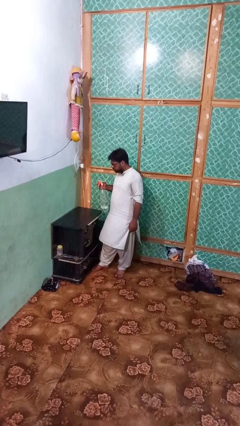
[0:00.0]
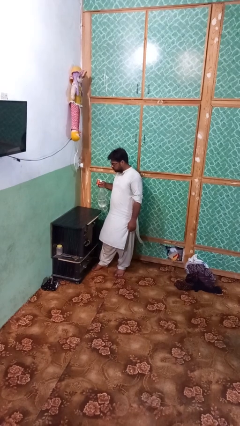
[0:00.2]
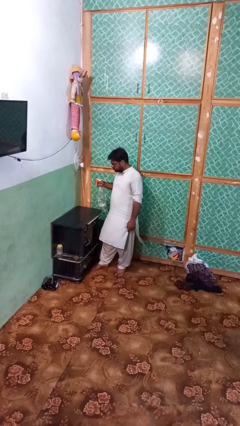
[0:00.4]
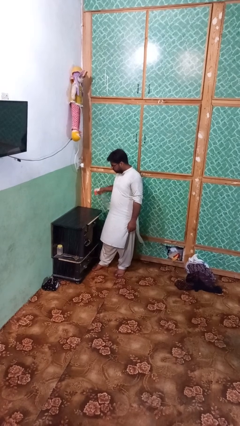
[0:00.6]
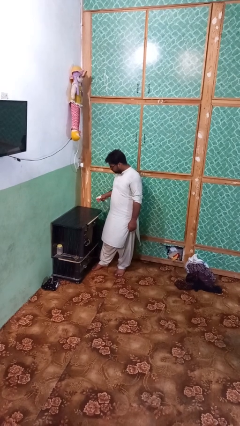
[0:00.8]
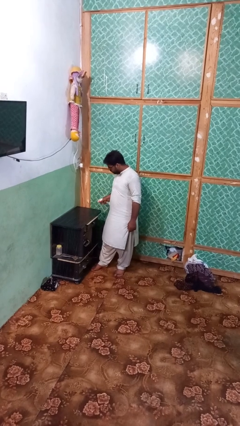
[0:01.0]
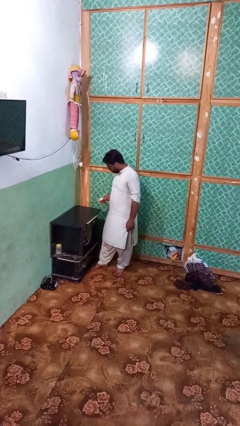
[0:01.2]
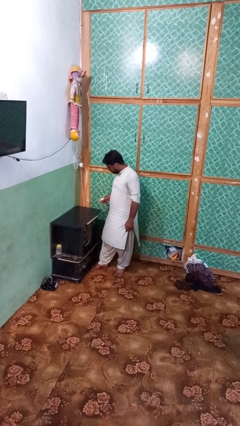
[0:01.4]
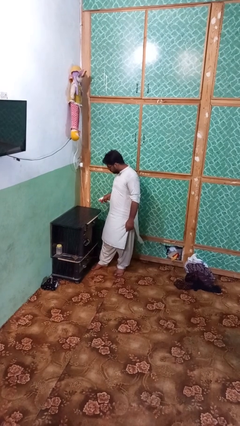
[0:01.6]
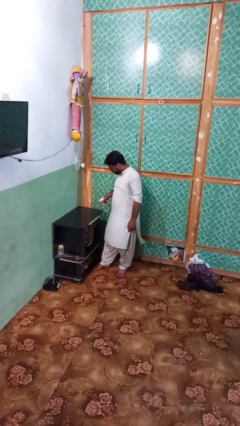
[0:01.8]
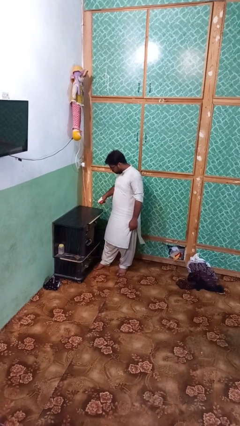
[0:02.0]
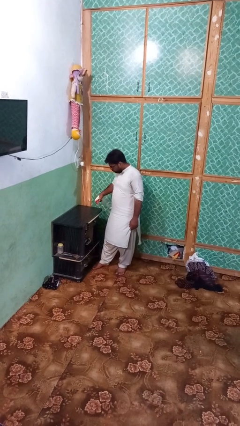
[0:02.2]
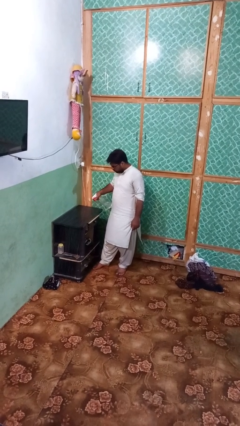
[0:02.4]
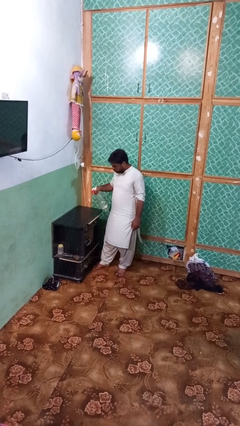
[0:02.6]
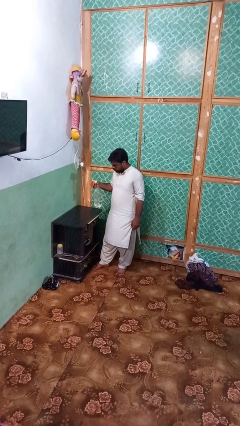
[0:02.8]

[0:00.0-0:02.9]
person sprays from bottle

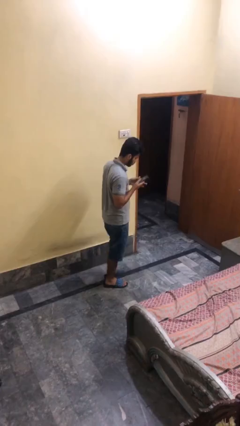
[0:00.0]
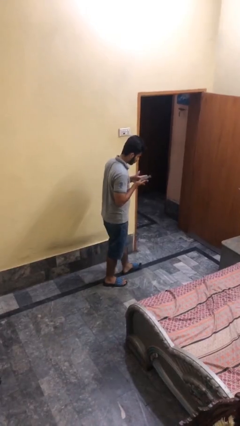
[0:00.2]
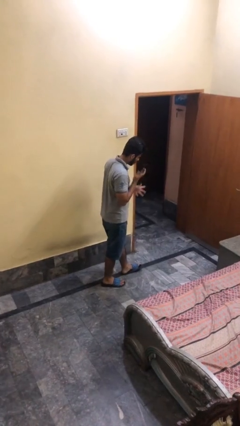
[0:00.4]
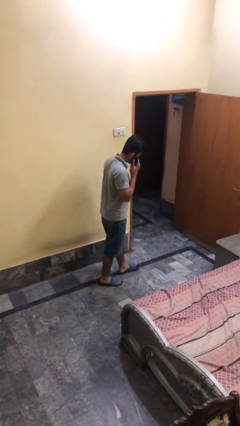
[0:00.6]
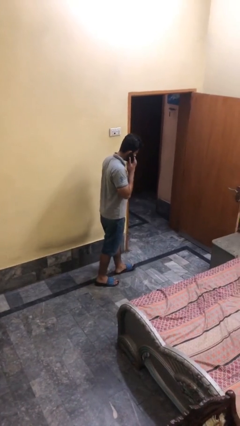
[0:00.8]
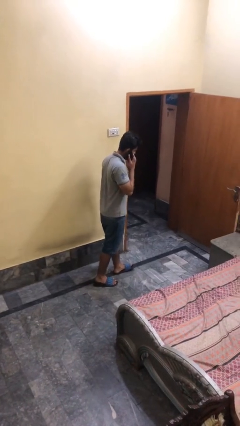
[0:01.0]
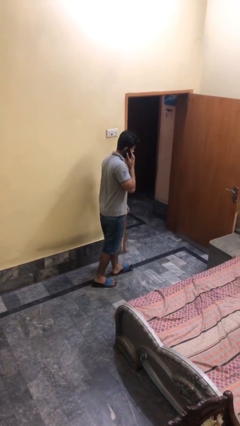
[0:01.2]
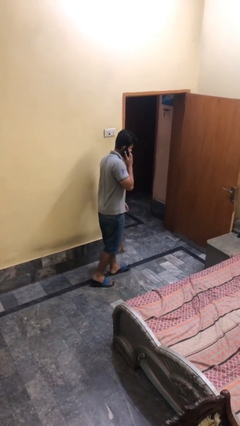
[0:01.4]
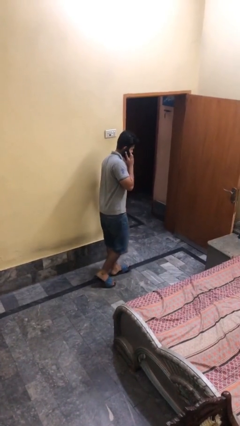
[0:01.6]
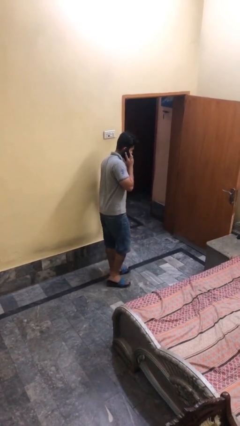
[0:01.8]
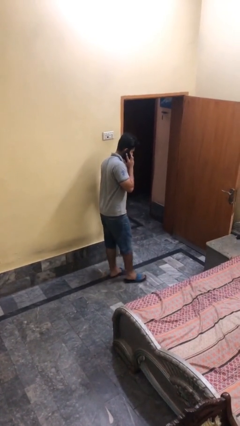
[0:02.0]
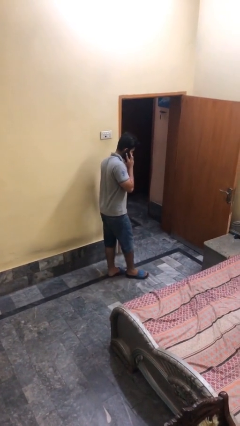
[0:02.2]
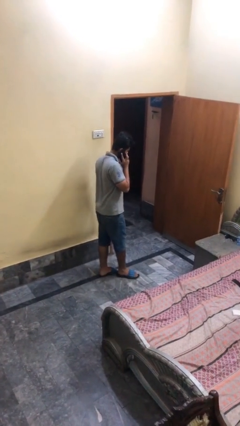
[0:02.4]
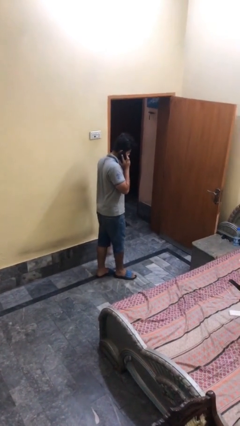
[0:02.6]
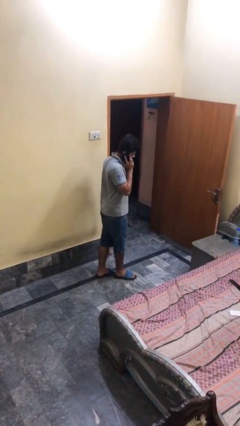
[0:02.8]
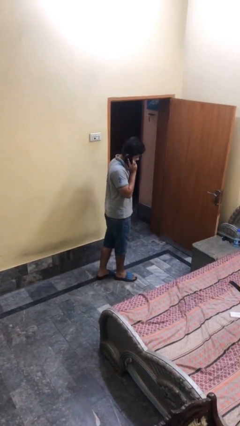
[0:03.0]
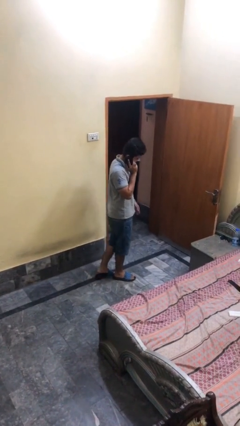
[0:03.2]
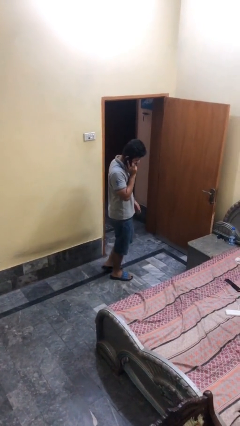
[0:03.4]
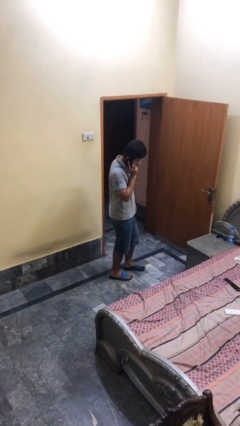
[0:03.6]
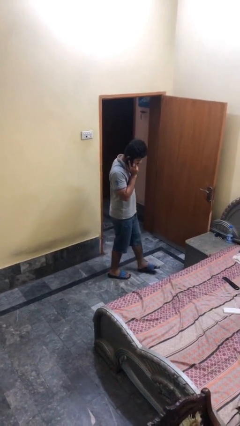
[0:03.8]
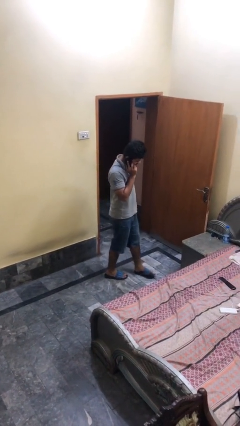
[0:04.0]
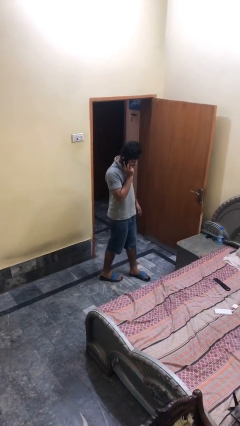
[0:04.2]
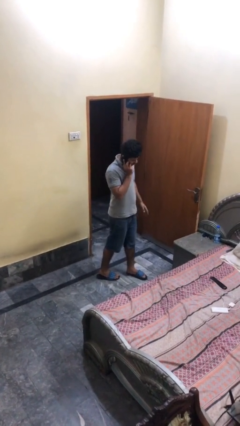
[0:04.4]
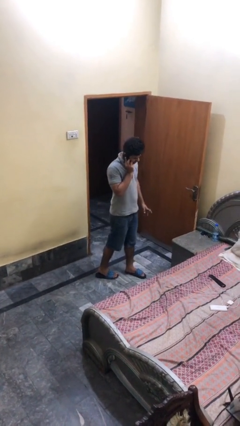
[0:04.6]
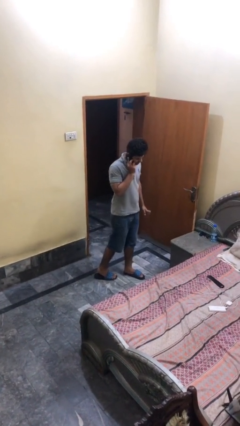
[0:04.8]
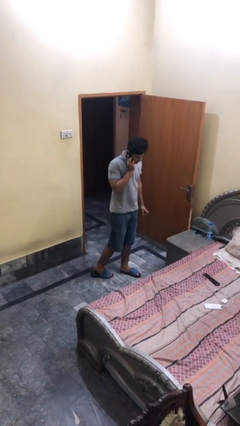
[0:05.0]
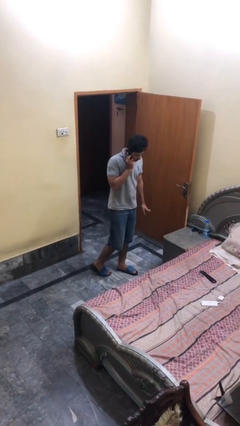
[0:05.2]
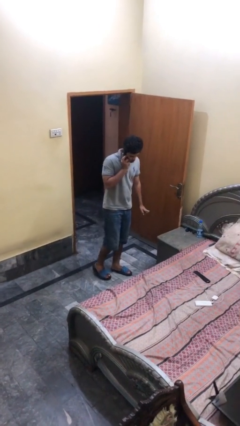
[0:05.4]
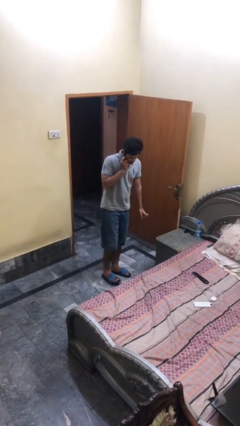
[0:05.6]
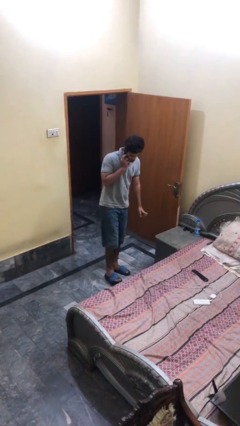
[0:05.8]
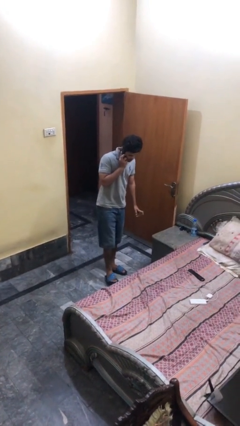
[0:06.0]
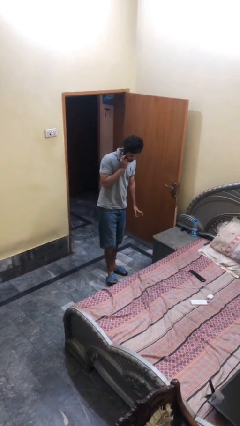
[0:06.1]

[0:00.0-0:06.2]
person talks on phone

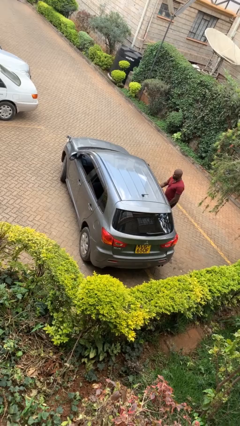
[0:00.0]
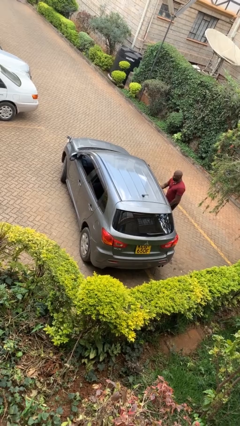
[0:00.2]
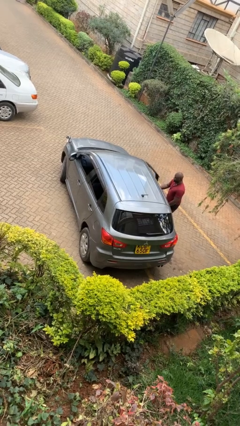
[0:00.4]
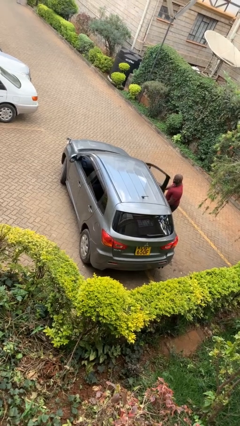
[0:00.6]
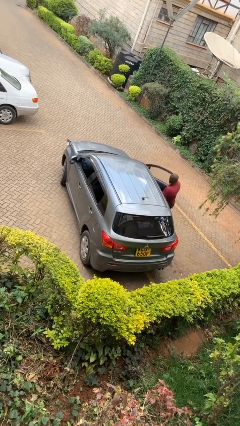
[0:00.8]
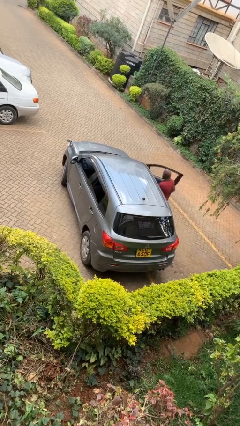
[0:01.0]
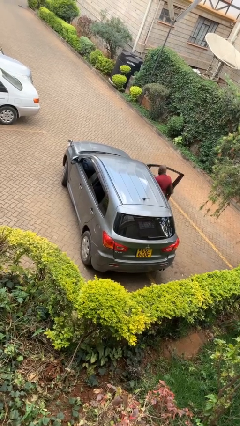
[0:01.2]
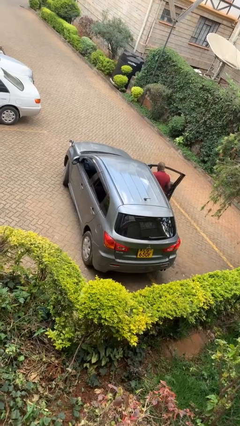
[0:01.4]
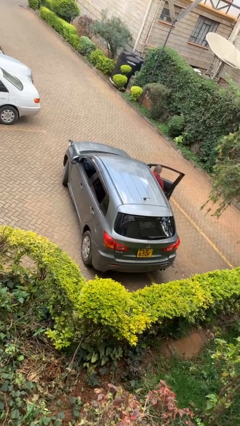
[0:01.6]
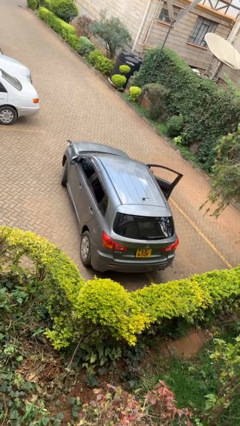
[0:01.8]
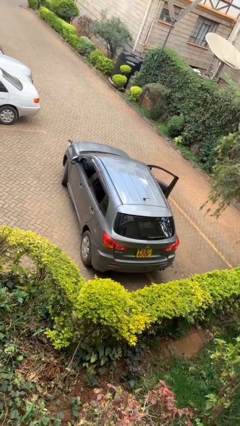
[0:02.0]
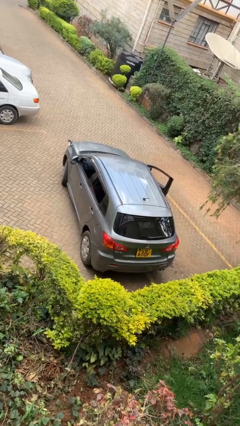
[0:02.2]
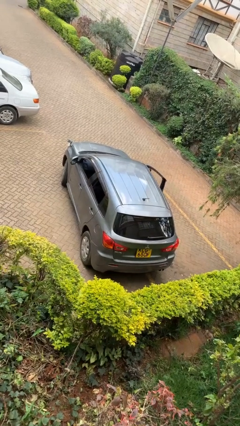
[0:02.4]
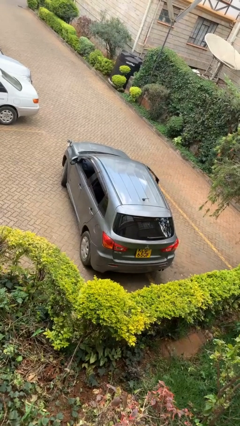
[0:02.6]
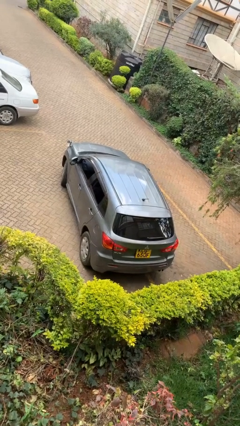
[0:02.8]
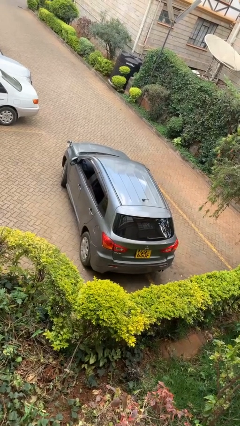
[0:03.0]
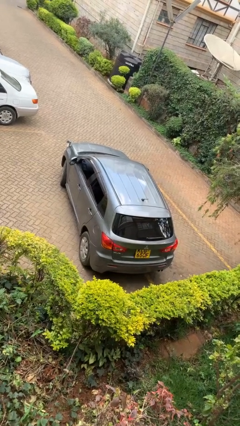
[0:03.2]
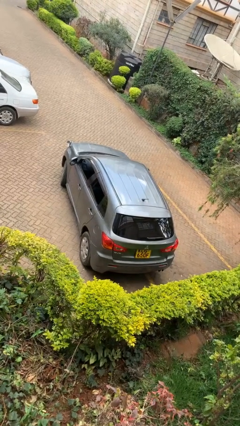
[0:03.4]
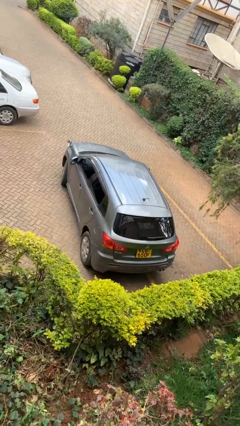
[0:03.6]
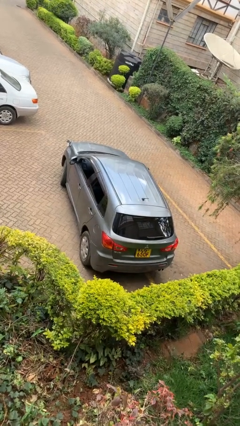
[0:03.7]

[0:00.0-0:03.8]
car picks up person

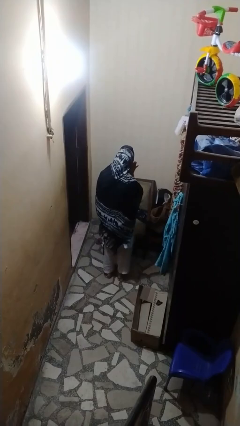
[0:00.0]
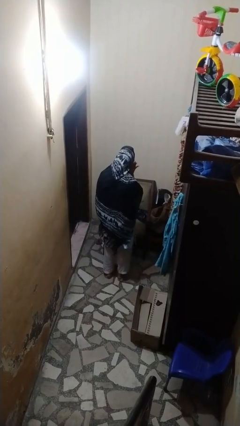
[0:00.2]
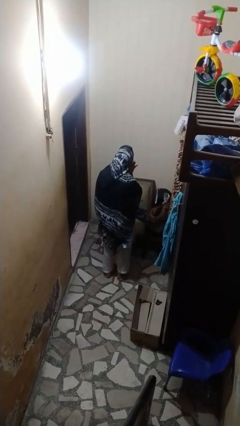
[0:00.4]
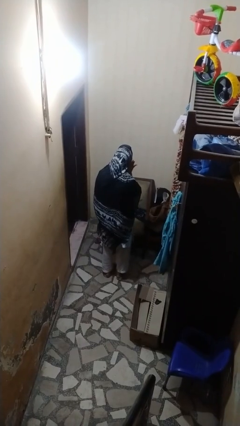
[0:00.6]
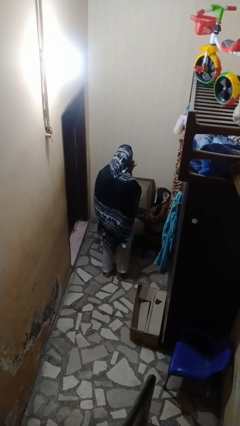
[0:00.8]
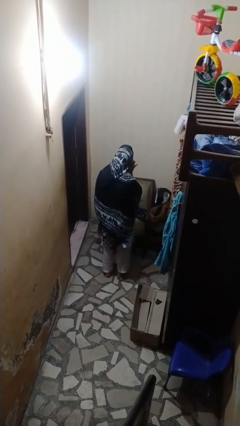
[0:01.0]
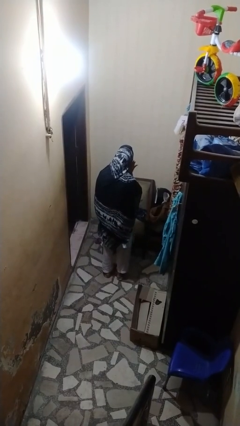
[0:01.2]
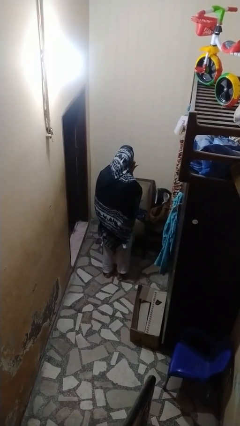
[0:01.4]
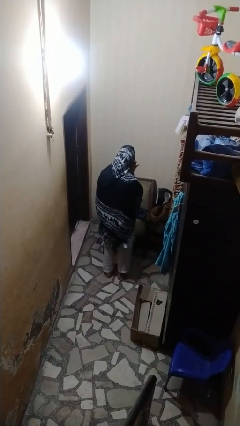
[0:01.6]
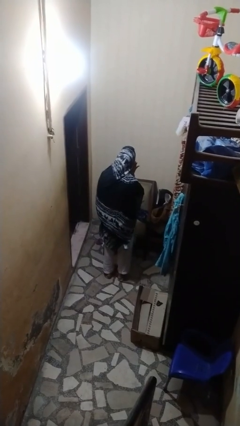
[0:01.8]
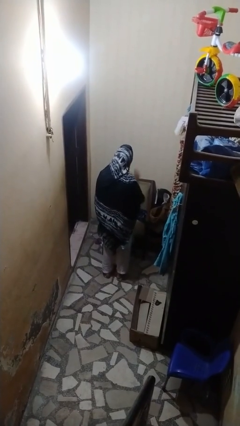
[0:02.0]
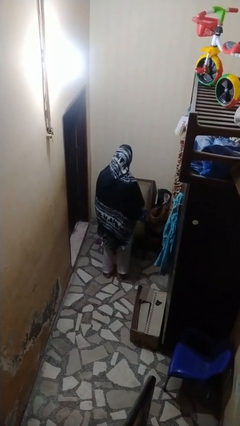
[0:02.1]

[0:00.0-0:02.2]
person gestures listen closely

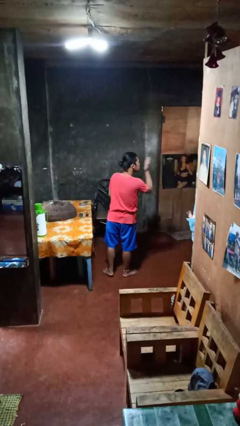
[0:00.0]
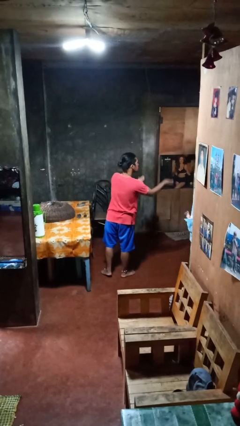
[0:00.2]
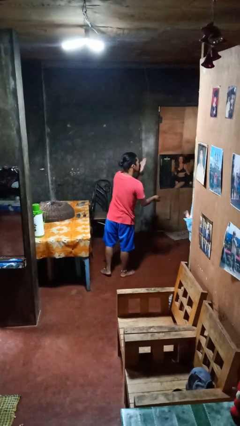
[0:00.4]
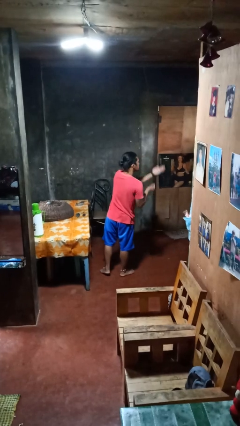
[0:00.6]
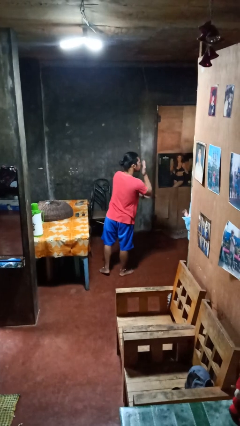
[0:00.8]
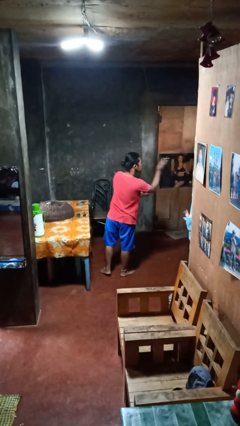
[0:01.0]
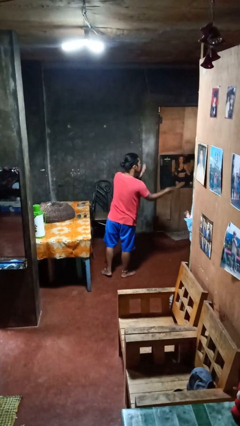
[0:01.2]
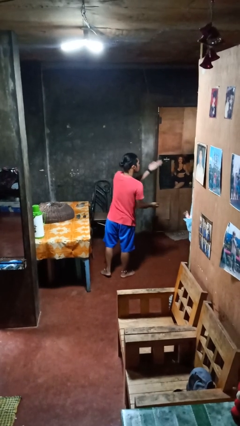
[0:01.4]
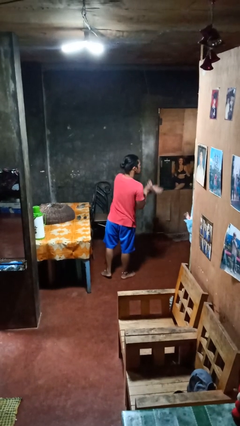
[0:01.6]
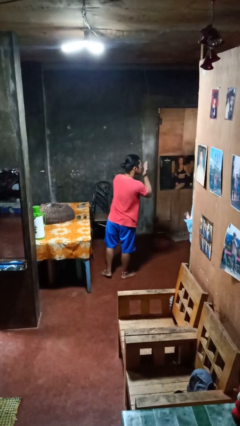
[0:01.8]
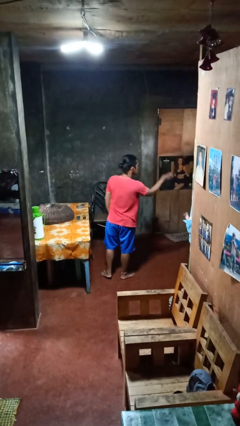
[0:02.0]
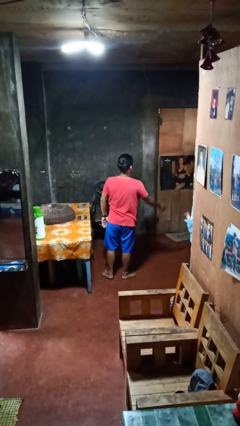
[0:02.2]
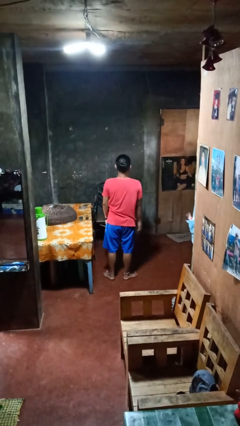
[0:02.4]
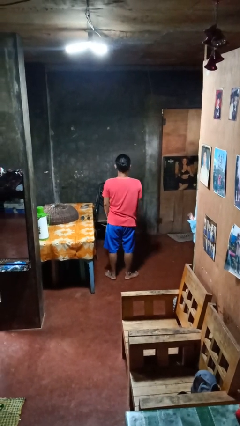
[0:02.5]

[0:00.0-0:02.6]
person gestures blow kiss
